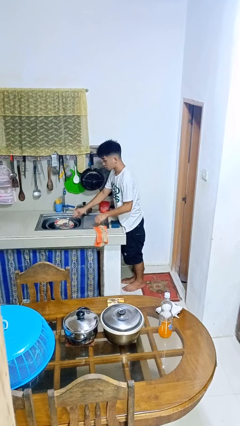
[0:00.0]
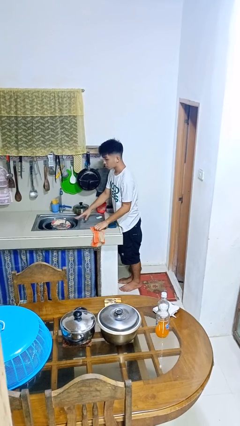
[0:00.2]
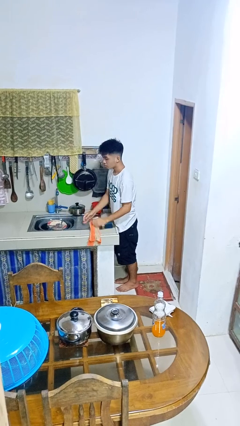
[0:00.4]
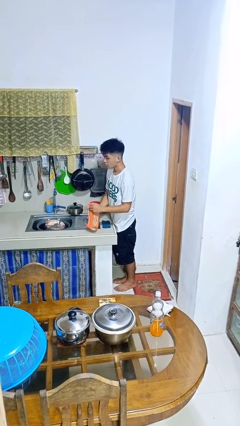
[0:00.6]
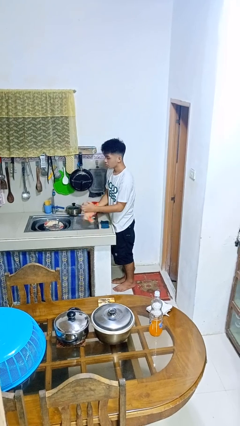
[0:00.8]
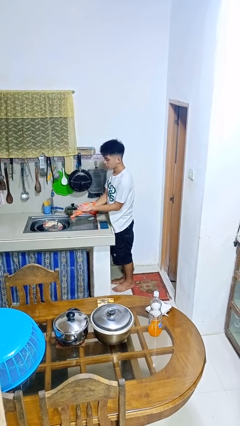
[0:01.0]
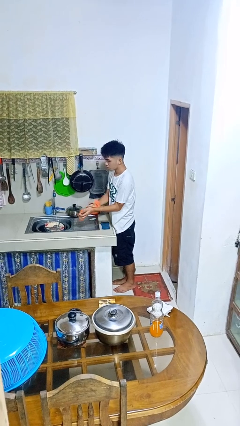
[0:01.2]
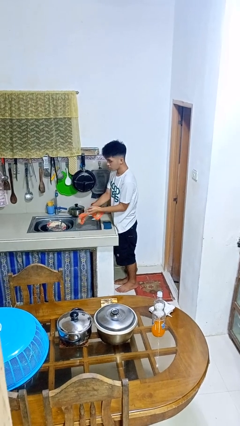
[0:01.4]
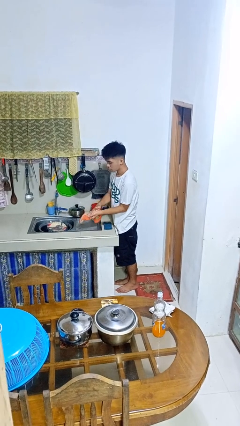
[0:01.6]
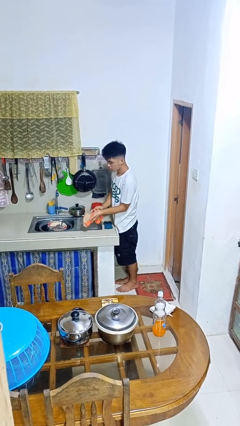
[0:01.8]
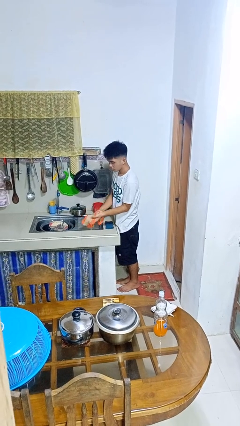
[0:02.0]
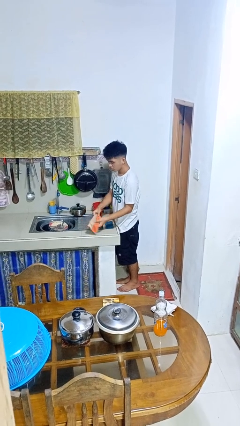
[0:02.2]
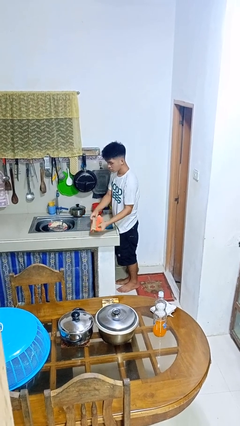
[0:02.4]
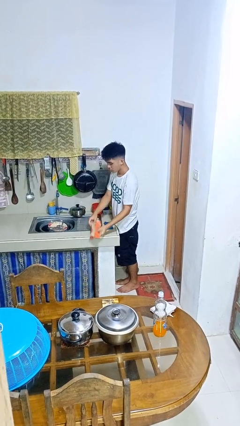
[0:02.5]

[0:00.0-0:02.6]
person dries hands with towel

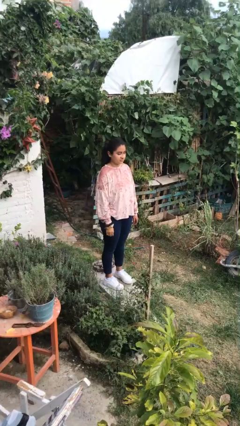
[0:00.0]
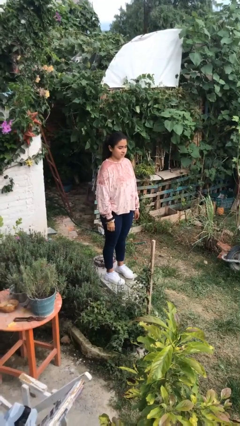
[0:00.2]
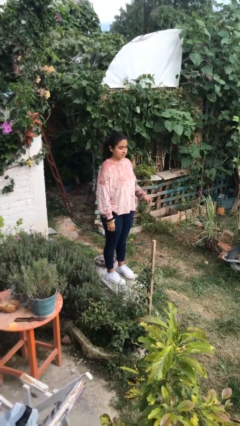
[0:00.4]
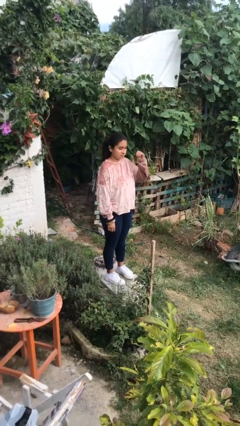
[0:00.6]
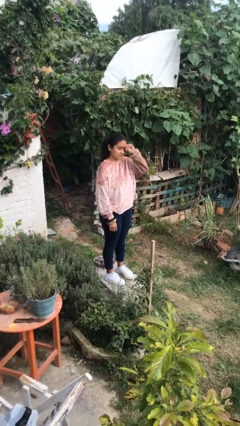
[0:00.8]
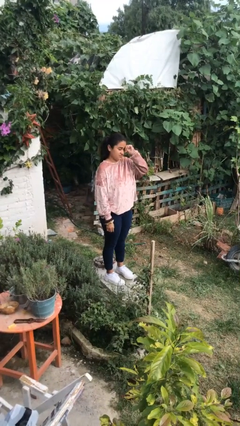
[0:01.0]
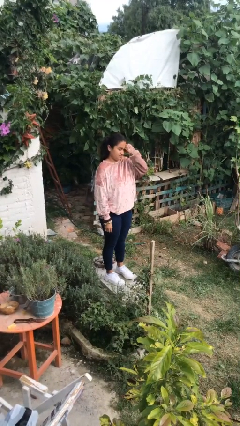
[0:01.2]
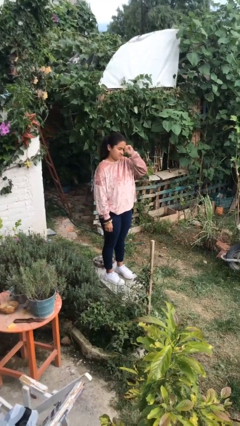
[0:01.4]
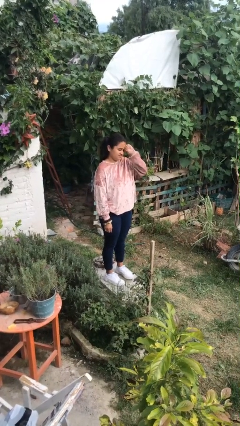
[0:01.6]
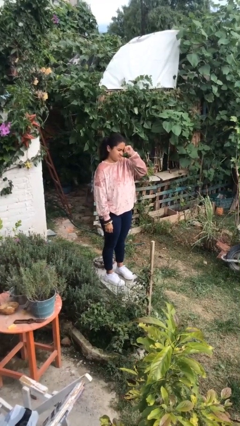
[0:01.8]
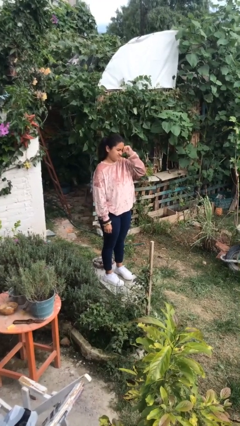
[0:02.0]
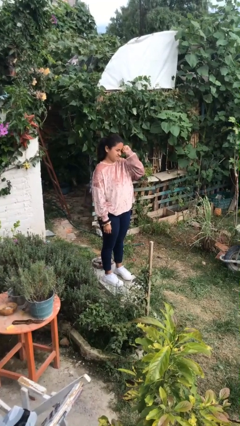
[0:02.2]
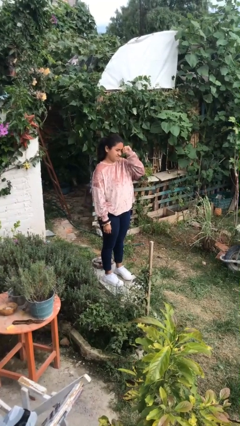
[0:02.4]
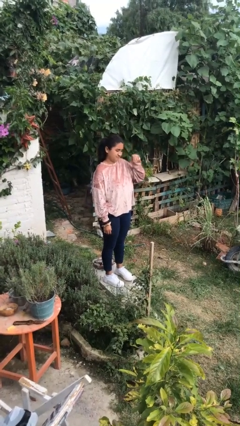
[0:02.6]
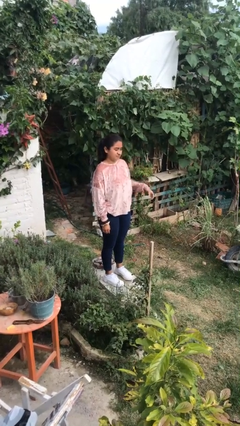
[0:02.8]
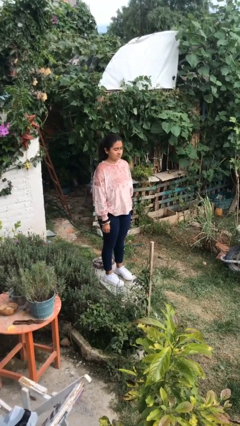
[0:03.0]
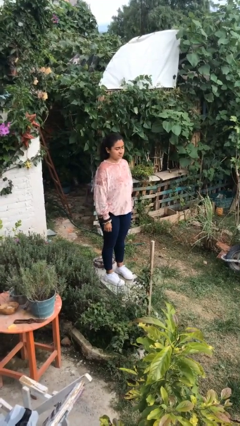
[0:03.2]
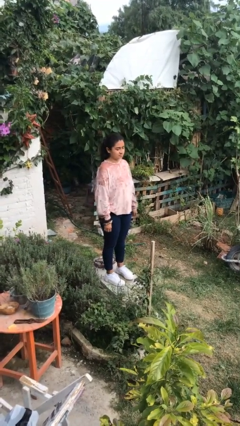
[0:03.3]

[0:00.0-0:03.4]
person rubs eyes

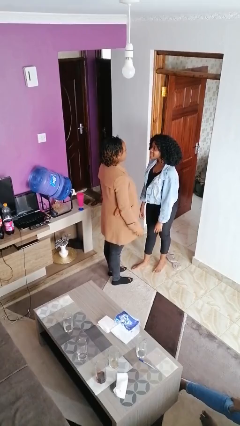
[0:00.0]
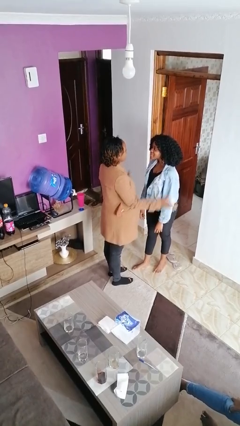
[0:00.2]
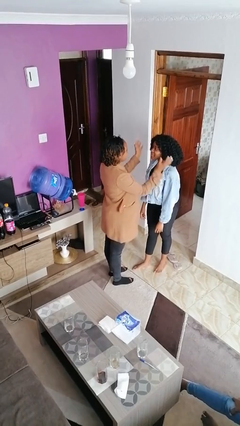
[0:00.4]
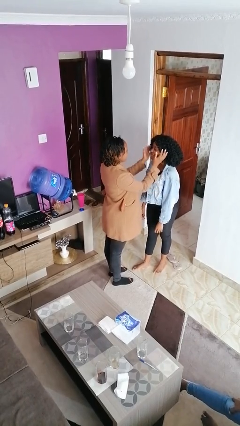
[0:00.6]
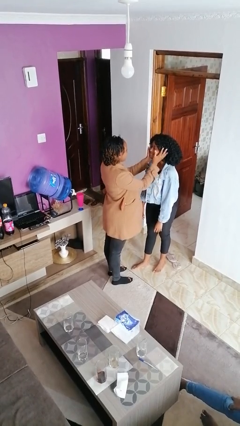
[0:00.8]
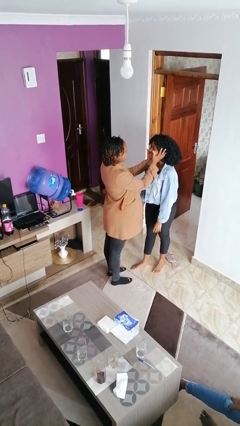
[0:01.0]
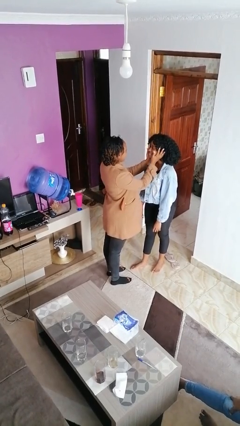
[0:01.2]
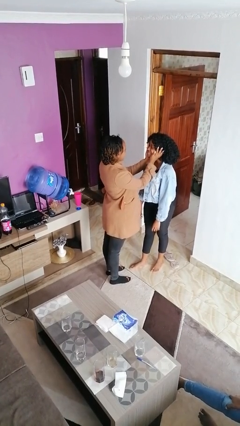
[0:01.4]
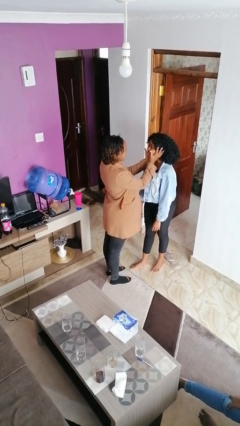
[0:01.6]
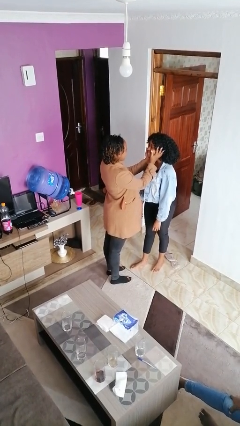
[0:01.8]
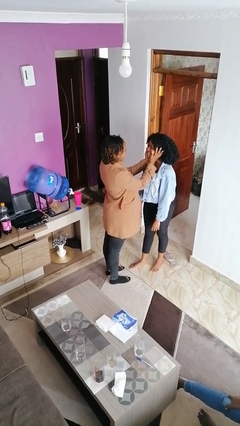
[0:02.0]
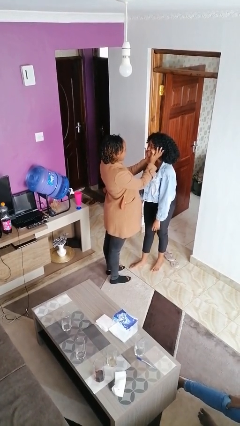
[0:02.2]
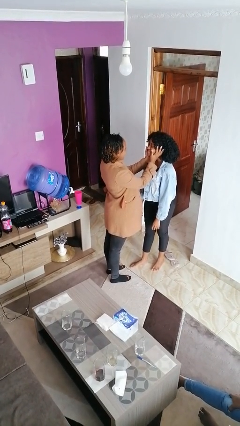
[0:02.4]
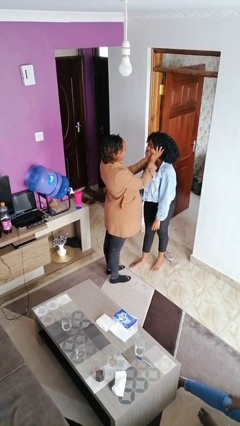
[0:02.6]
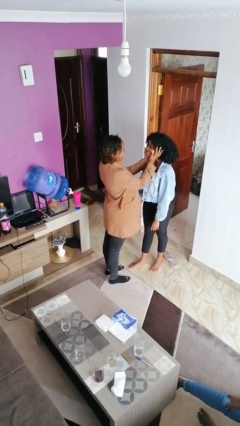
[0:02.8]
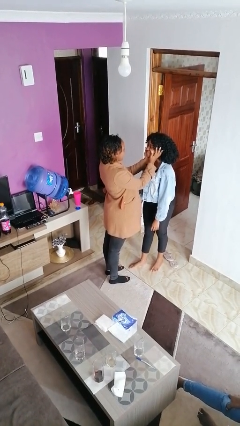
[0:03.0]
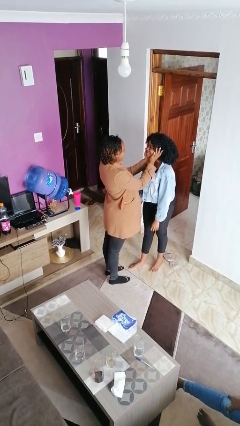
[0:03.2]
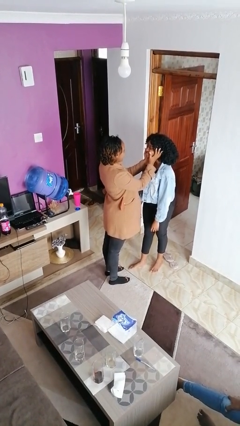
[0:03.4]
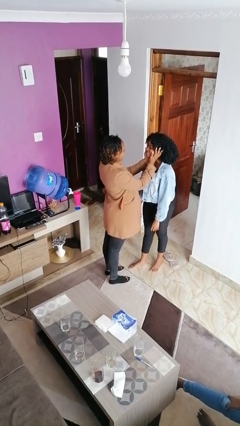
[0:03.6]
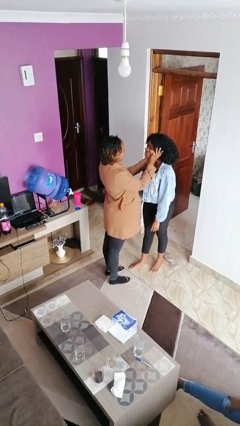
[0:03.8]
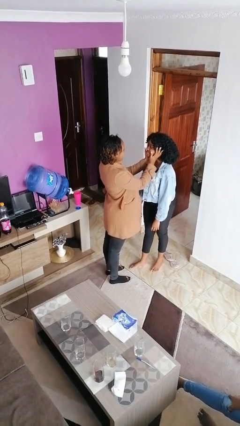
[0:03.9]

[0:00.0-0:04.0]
person touches face of person

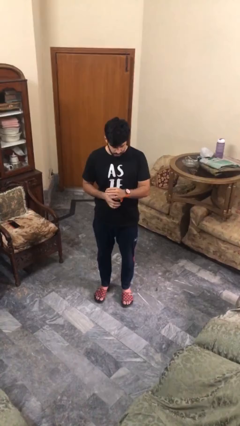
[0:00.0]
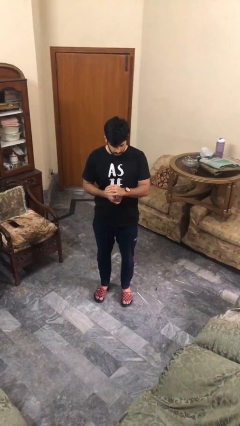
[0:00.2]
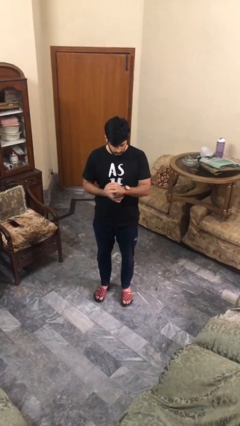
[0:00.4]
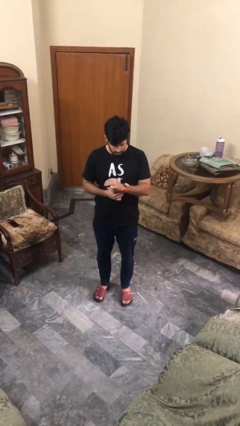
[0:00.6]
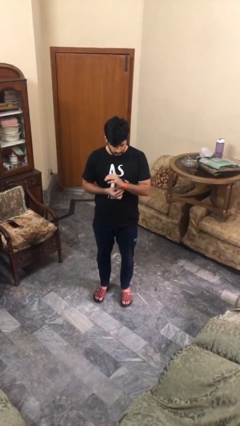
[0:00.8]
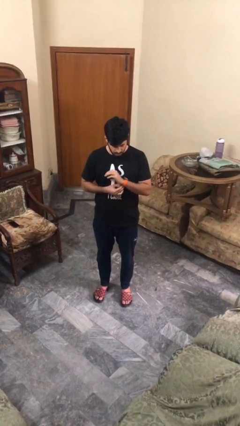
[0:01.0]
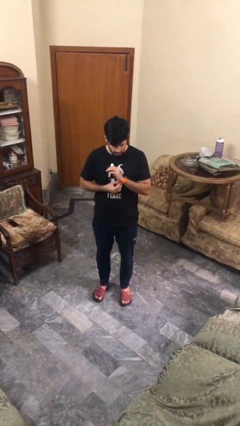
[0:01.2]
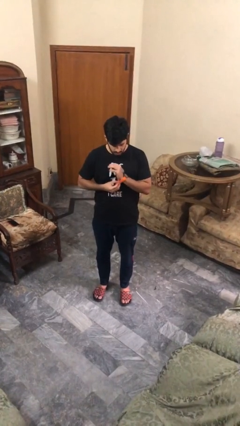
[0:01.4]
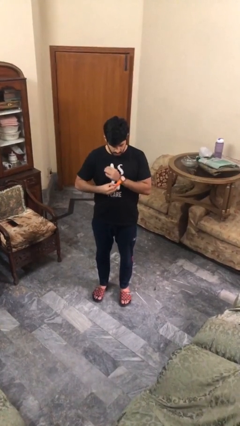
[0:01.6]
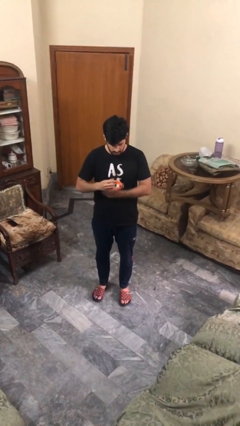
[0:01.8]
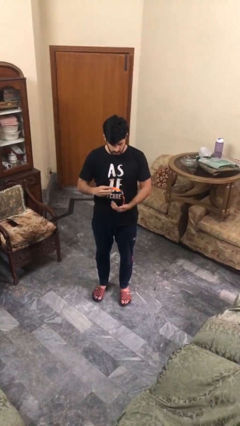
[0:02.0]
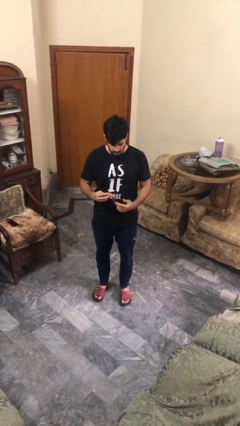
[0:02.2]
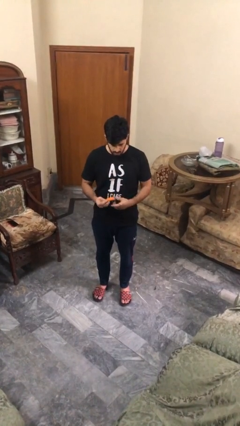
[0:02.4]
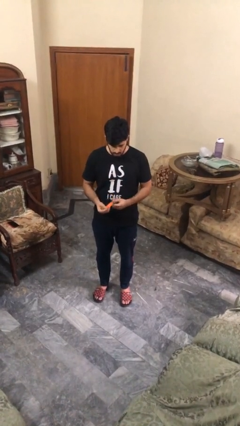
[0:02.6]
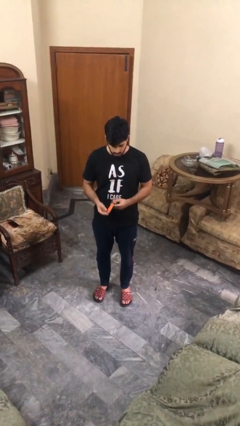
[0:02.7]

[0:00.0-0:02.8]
person takes off wristwatch

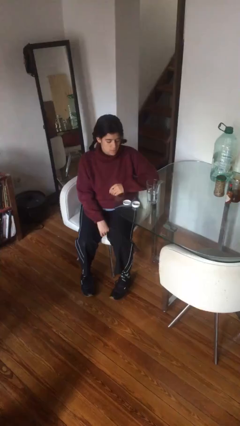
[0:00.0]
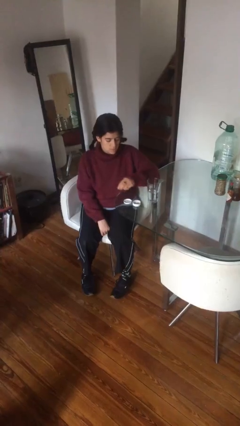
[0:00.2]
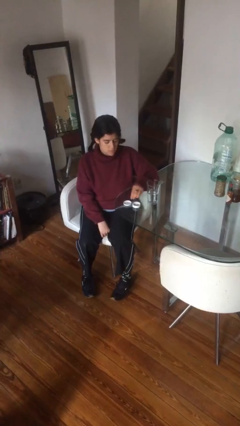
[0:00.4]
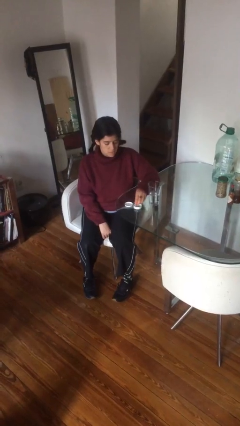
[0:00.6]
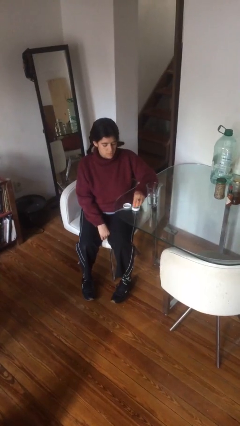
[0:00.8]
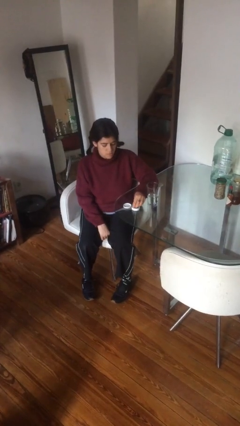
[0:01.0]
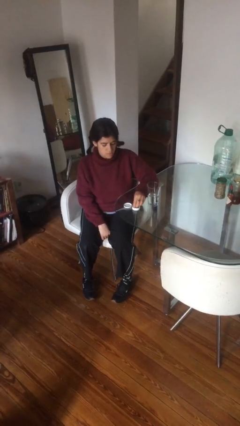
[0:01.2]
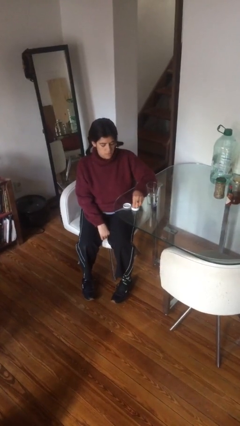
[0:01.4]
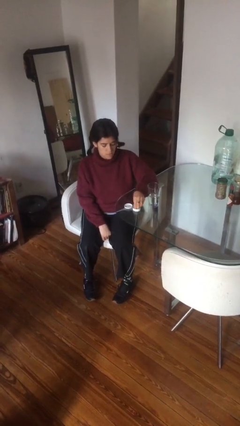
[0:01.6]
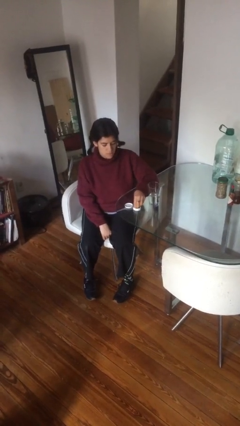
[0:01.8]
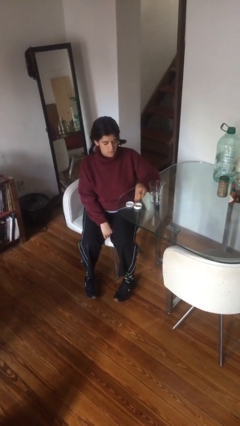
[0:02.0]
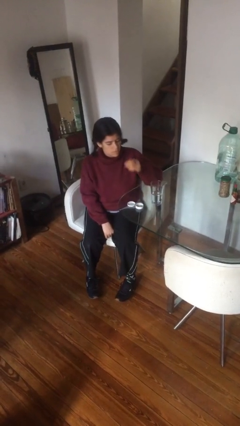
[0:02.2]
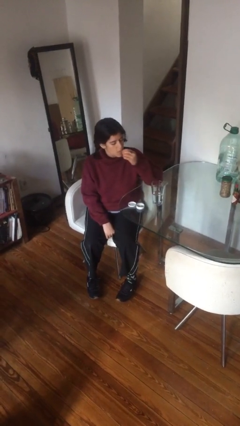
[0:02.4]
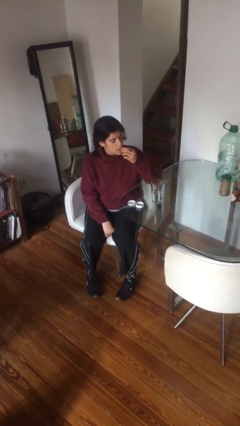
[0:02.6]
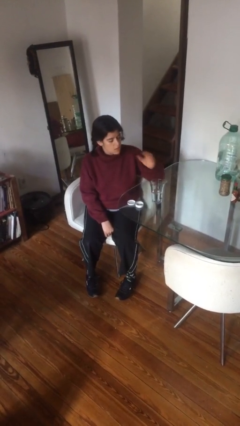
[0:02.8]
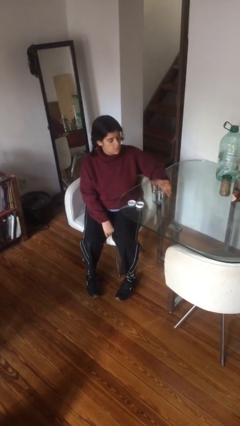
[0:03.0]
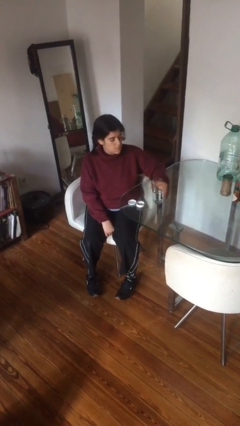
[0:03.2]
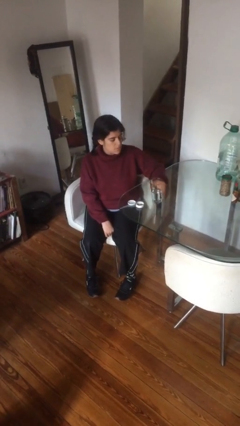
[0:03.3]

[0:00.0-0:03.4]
person takes medicine pills

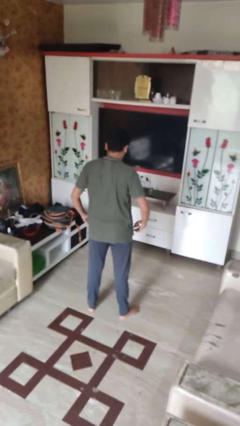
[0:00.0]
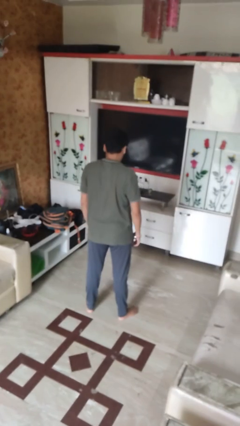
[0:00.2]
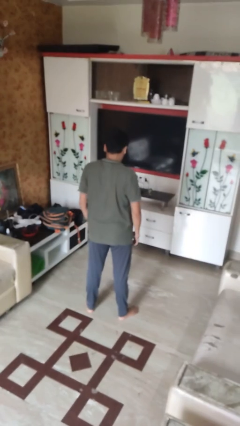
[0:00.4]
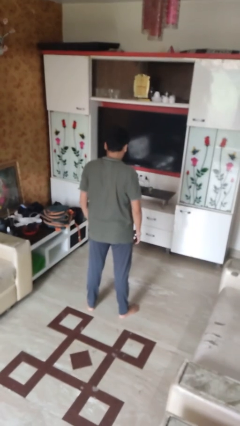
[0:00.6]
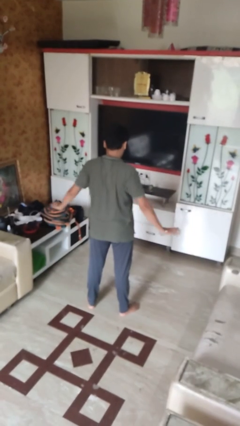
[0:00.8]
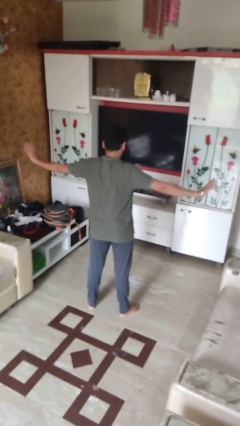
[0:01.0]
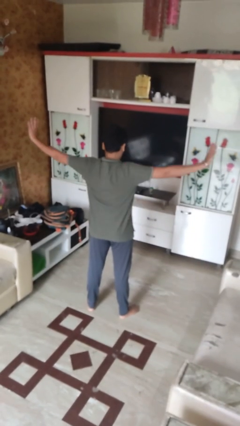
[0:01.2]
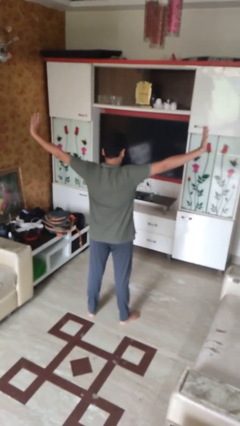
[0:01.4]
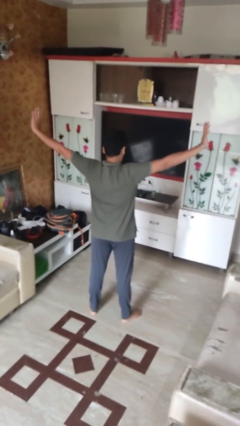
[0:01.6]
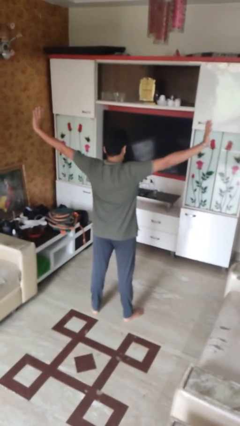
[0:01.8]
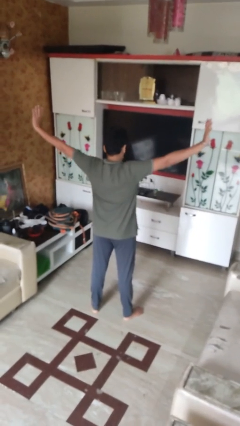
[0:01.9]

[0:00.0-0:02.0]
person stretches arms to side
